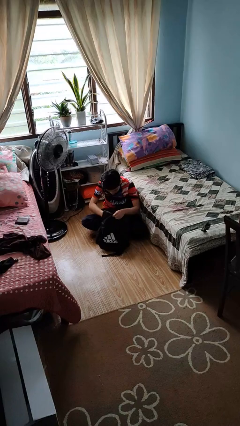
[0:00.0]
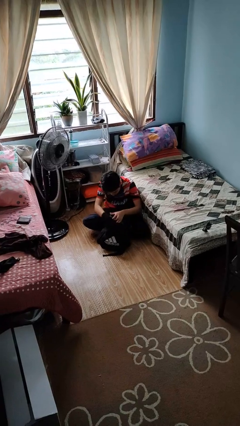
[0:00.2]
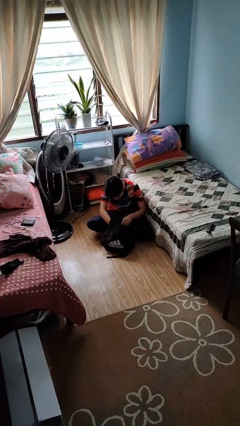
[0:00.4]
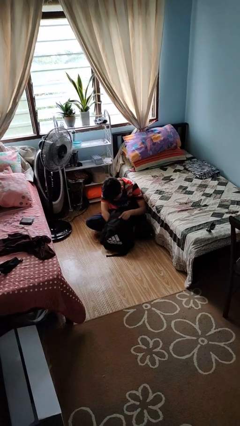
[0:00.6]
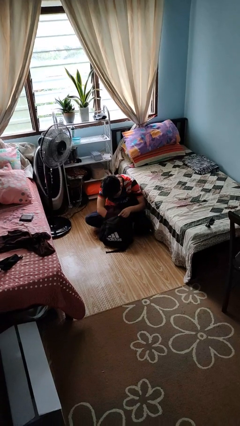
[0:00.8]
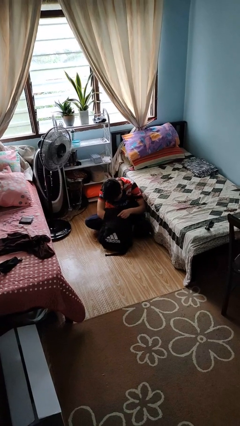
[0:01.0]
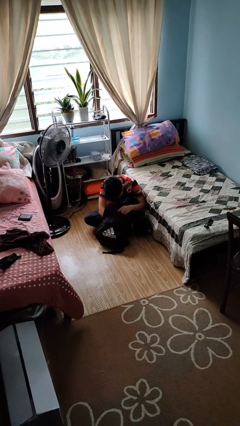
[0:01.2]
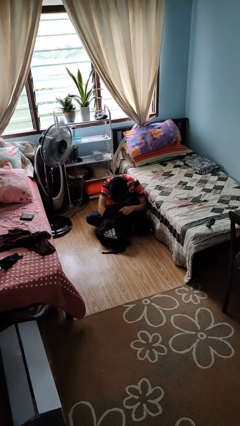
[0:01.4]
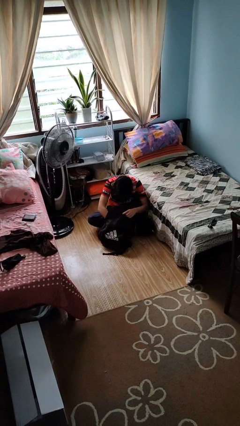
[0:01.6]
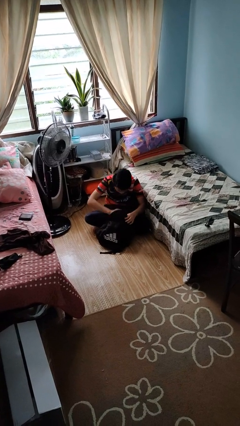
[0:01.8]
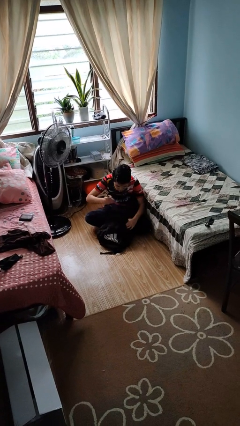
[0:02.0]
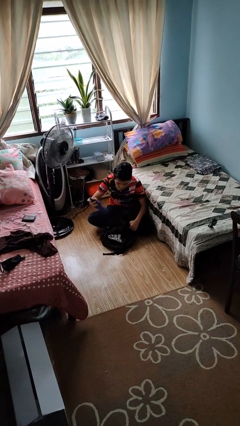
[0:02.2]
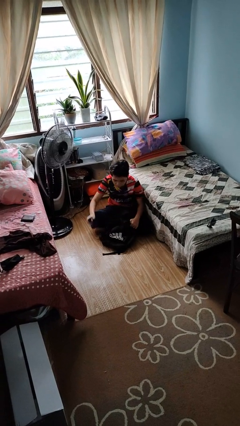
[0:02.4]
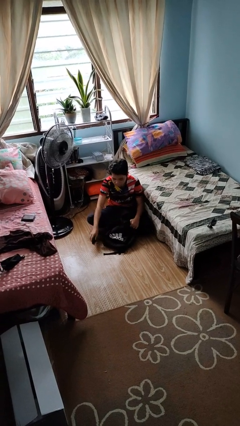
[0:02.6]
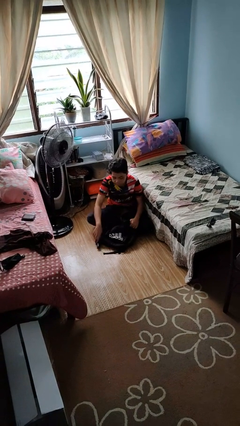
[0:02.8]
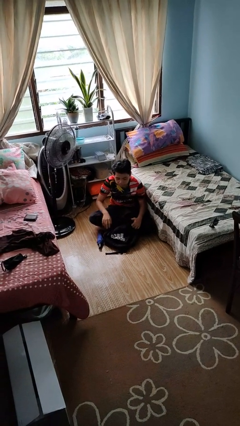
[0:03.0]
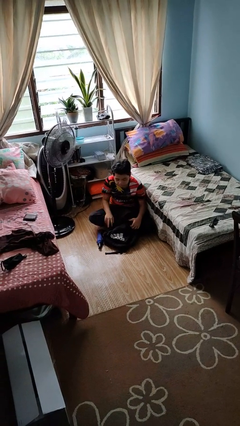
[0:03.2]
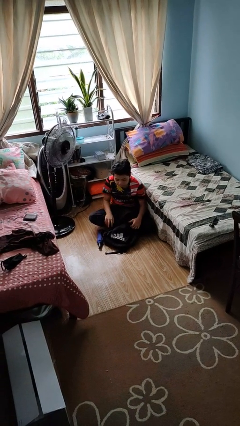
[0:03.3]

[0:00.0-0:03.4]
person takes object from backpack

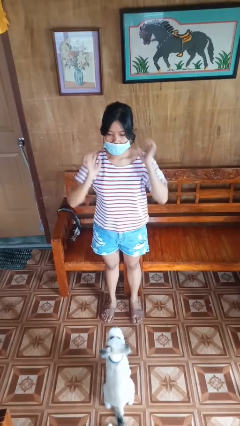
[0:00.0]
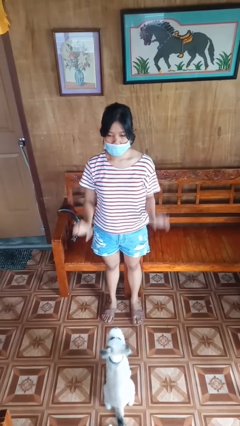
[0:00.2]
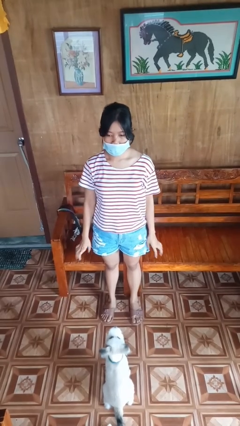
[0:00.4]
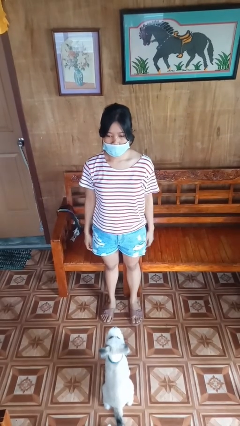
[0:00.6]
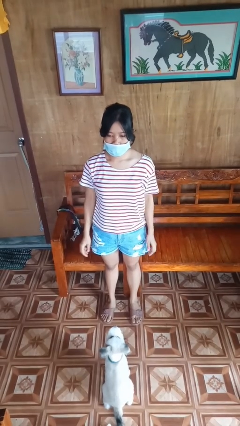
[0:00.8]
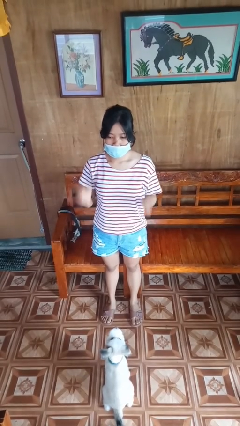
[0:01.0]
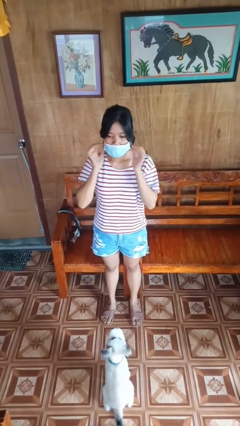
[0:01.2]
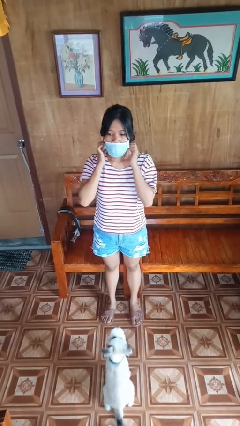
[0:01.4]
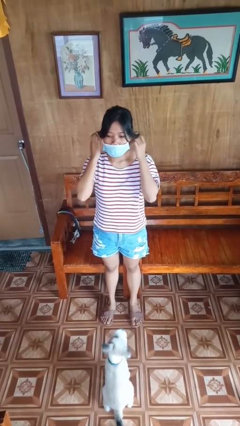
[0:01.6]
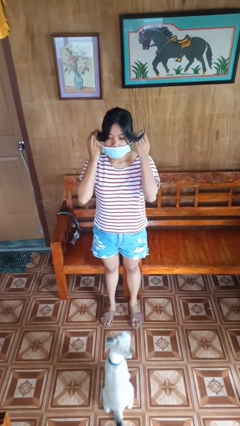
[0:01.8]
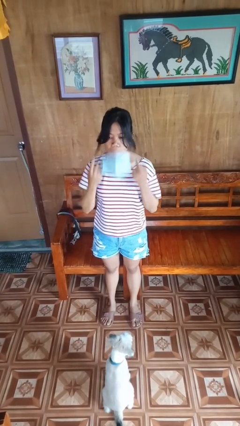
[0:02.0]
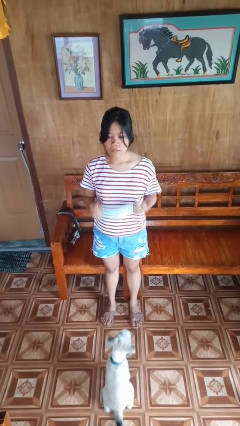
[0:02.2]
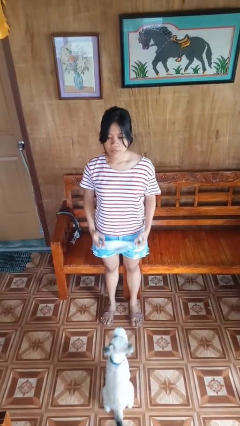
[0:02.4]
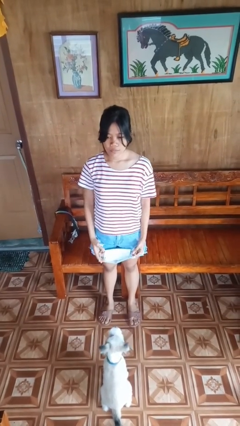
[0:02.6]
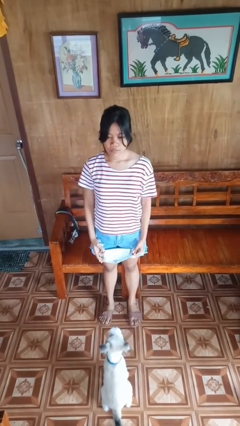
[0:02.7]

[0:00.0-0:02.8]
person takes off facemask

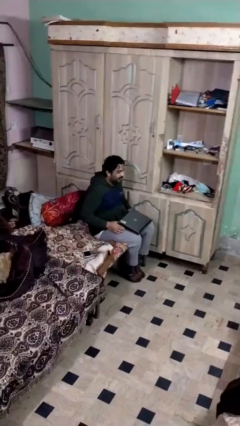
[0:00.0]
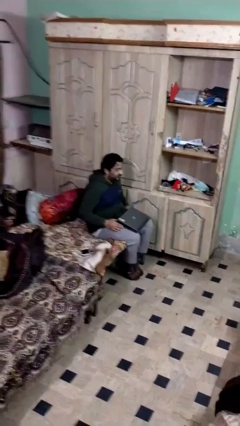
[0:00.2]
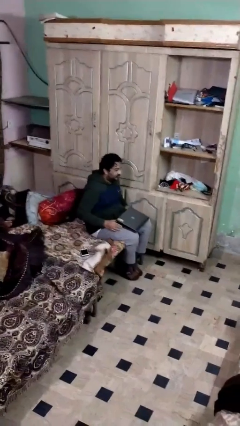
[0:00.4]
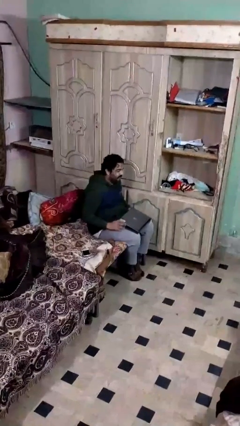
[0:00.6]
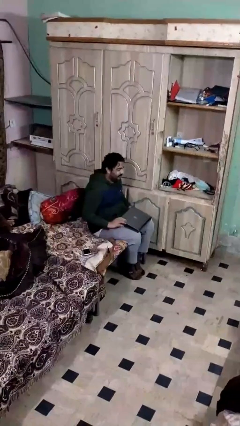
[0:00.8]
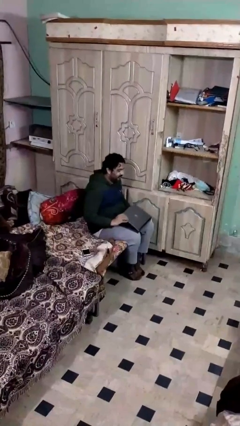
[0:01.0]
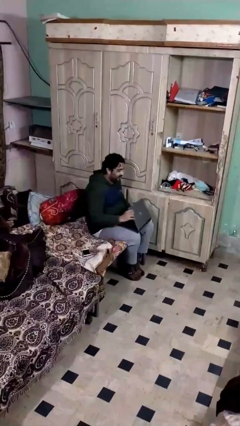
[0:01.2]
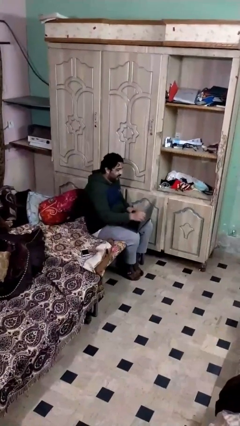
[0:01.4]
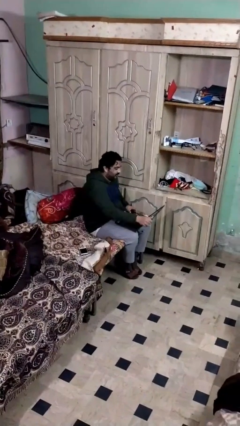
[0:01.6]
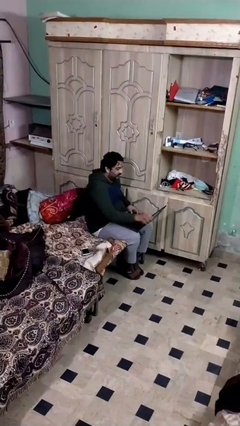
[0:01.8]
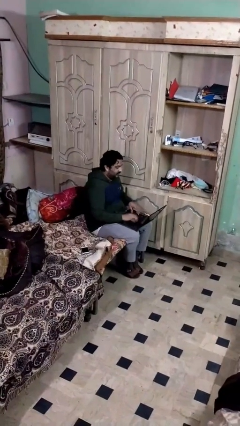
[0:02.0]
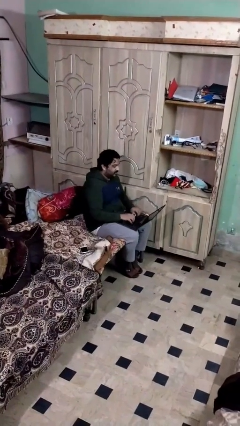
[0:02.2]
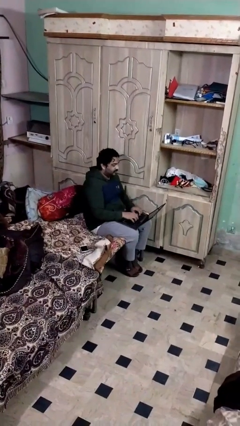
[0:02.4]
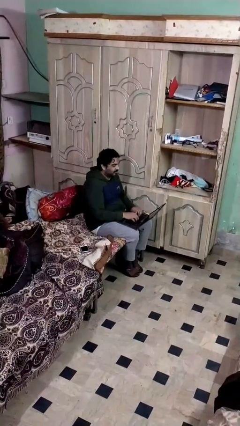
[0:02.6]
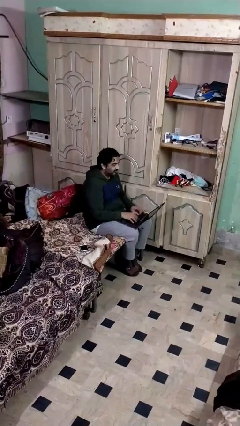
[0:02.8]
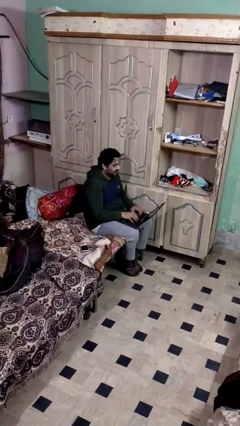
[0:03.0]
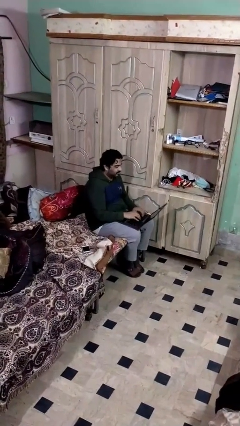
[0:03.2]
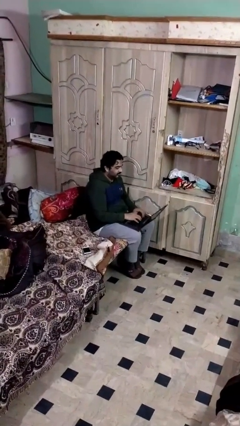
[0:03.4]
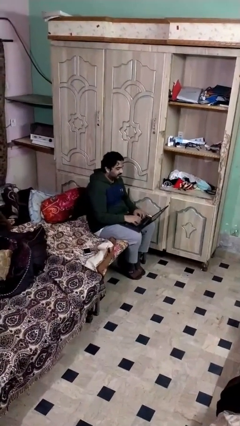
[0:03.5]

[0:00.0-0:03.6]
person interacts with laptop

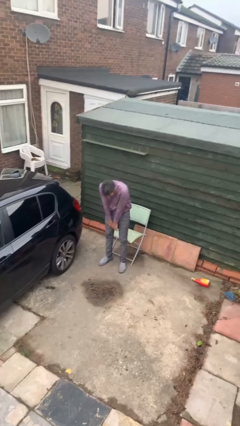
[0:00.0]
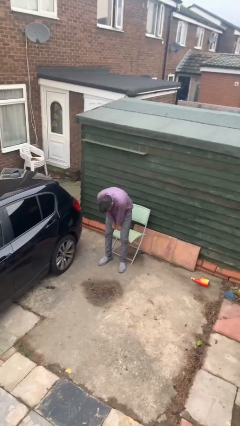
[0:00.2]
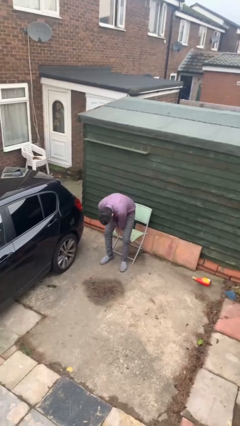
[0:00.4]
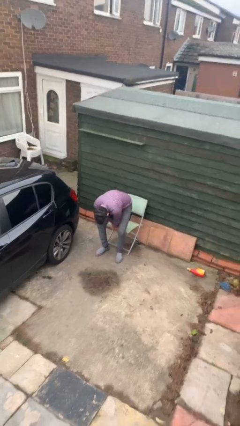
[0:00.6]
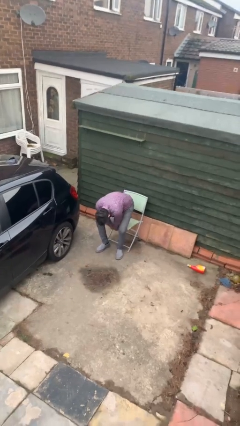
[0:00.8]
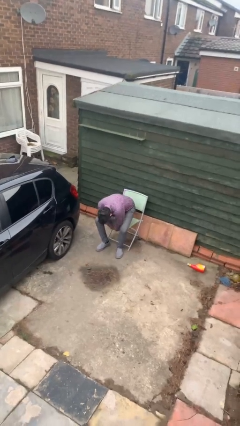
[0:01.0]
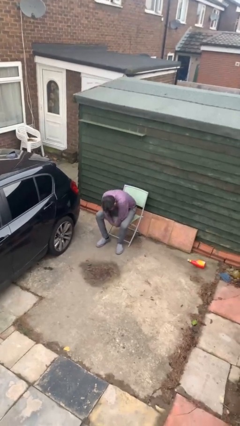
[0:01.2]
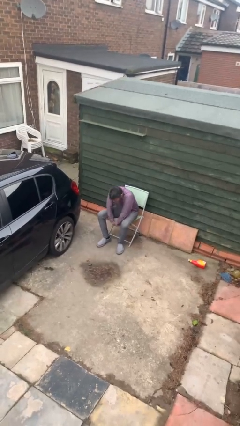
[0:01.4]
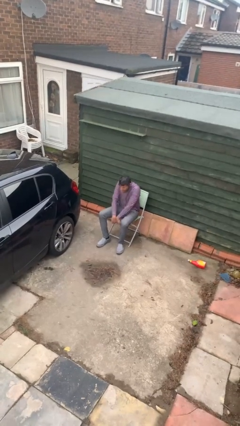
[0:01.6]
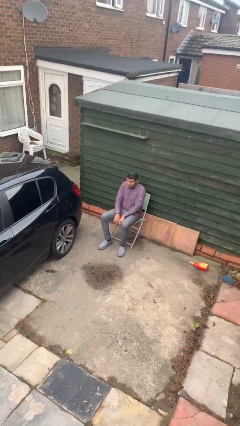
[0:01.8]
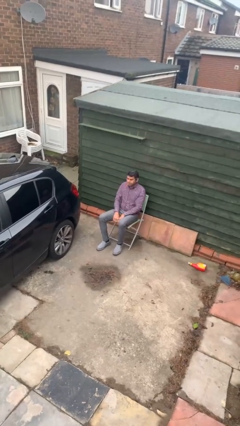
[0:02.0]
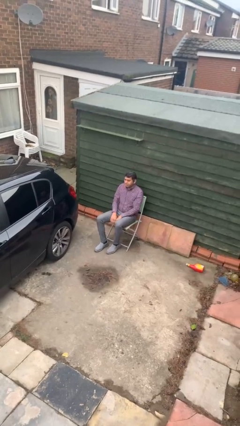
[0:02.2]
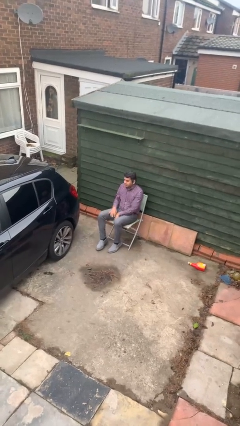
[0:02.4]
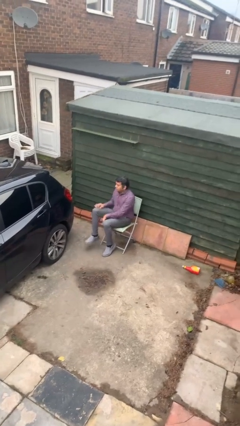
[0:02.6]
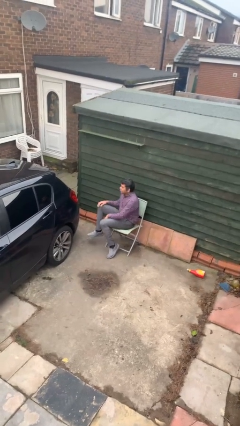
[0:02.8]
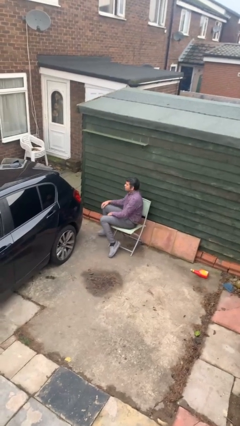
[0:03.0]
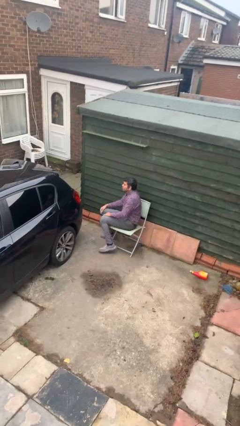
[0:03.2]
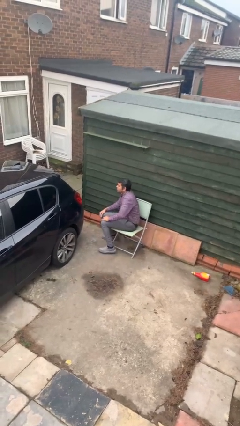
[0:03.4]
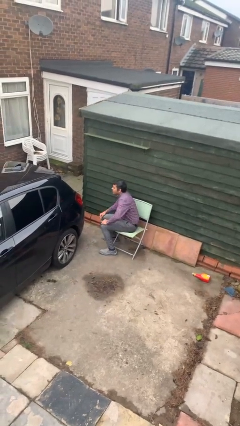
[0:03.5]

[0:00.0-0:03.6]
person sits down

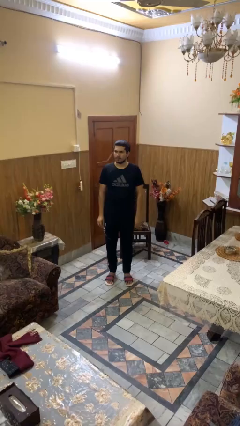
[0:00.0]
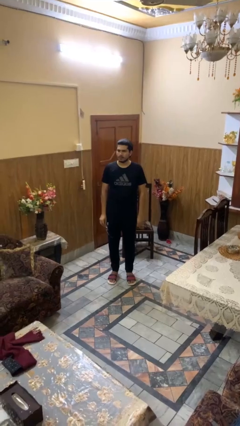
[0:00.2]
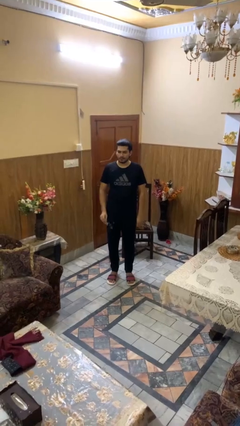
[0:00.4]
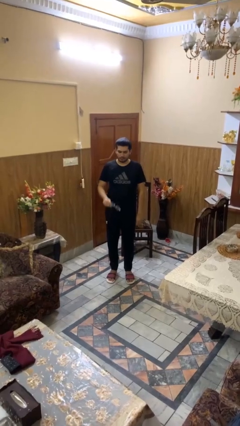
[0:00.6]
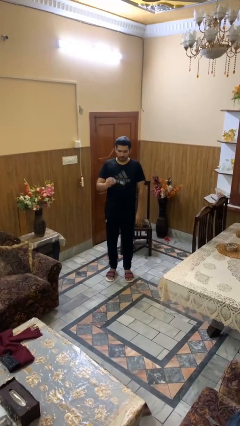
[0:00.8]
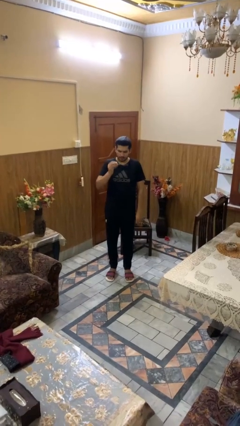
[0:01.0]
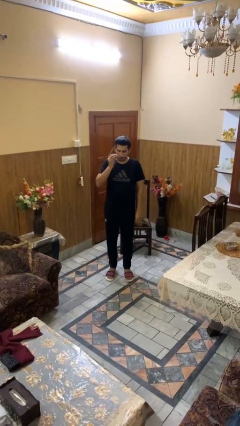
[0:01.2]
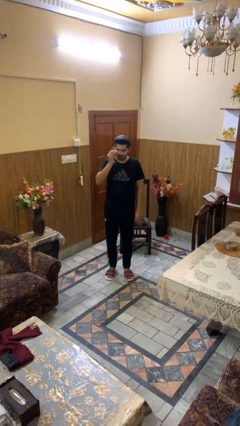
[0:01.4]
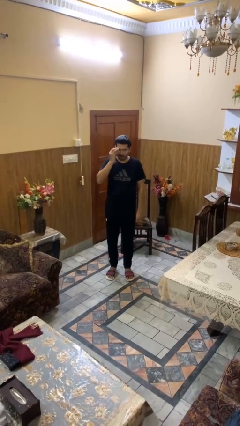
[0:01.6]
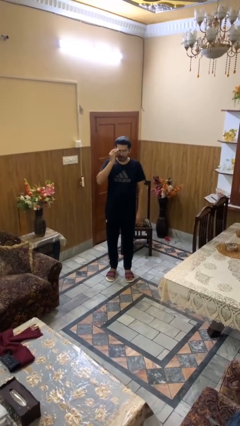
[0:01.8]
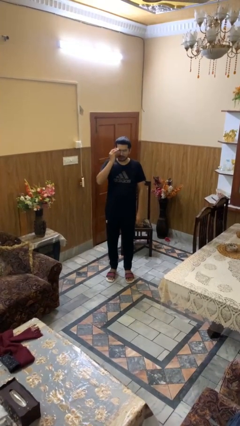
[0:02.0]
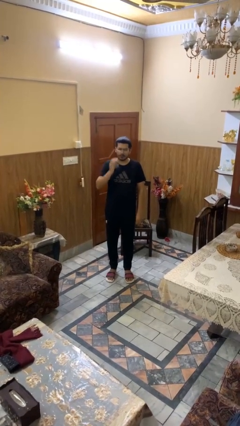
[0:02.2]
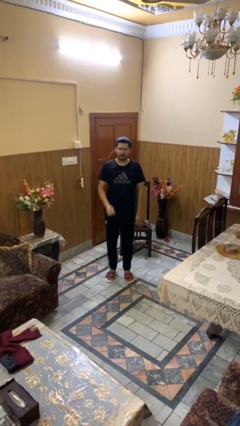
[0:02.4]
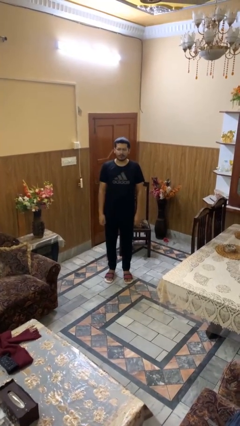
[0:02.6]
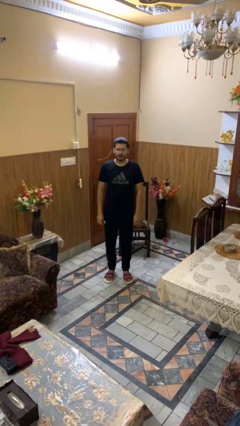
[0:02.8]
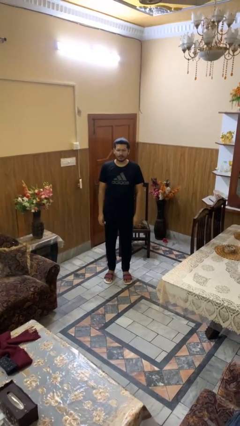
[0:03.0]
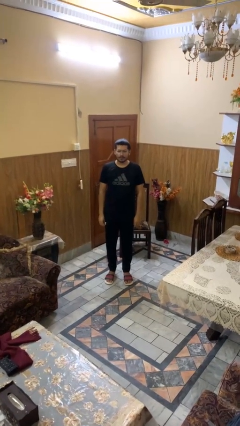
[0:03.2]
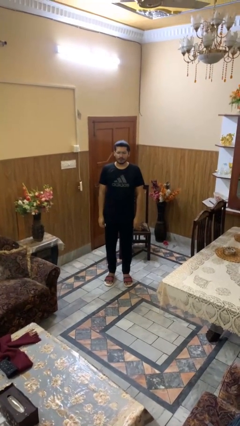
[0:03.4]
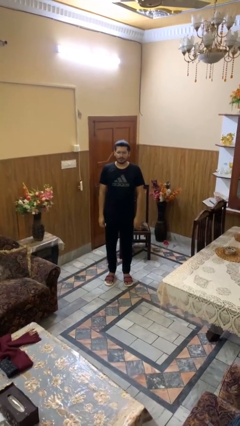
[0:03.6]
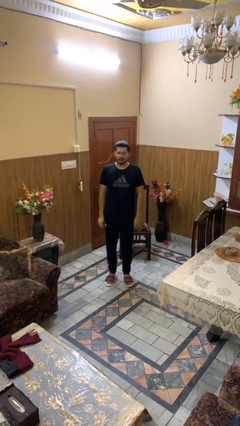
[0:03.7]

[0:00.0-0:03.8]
person puts on glasses

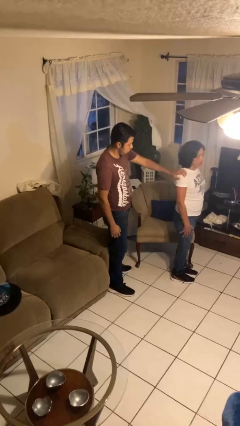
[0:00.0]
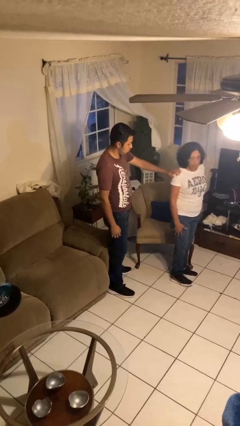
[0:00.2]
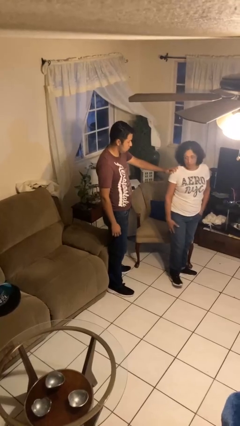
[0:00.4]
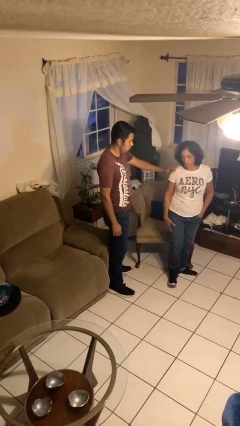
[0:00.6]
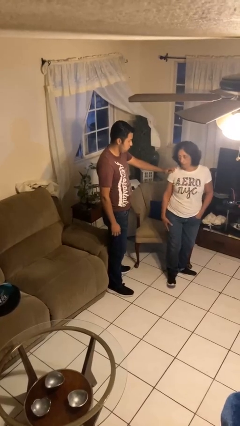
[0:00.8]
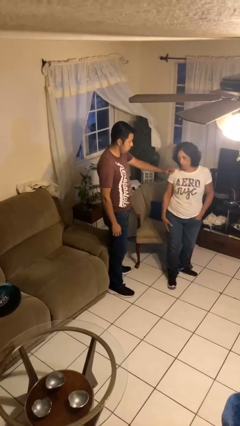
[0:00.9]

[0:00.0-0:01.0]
person spins person around
